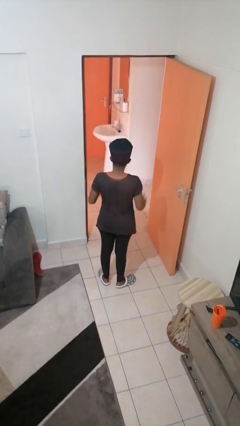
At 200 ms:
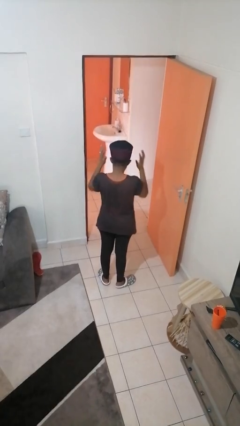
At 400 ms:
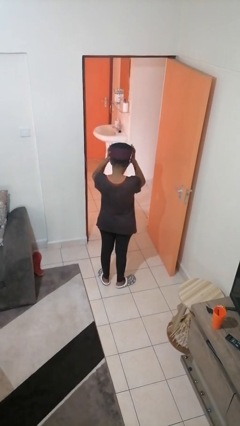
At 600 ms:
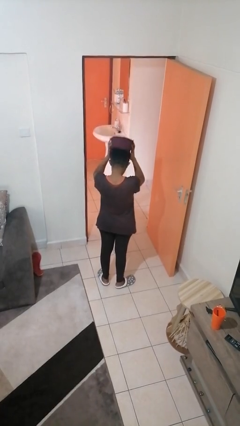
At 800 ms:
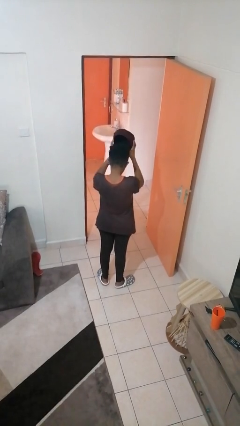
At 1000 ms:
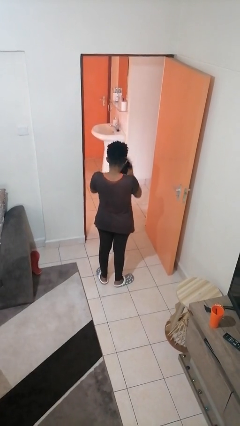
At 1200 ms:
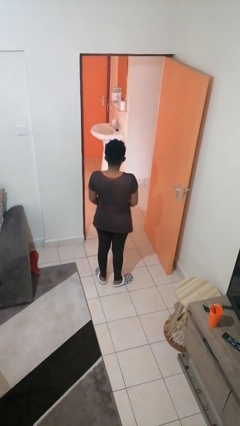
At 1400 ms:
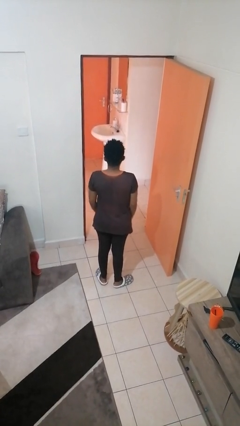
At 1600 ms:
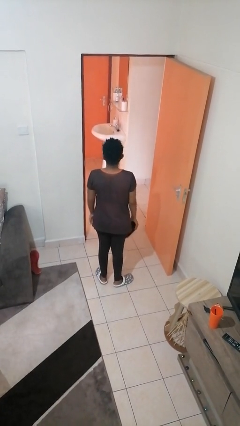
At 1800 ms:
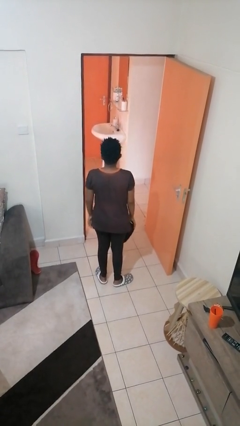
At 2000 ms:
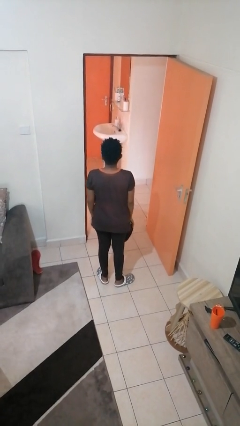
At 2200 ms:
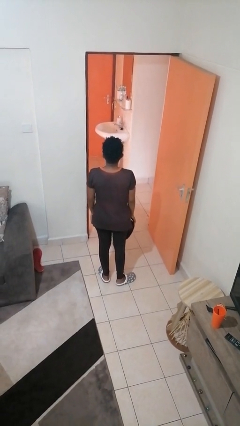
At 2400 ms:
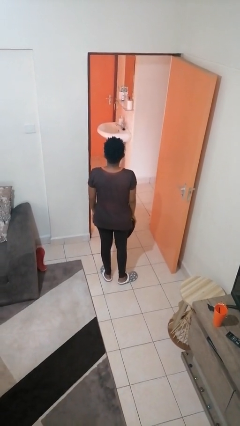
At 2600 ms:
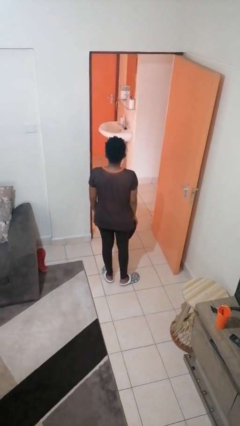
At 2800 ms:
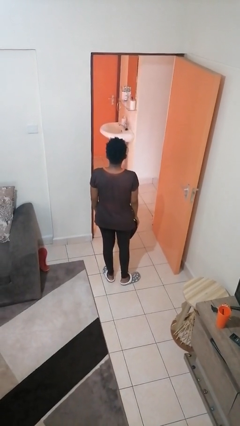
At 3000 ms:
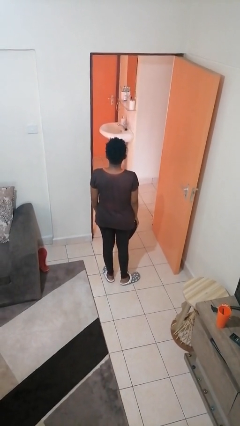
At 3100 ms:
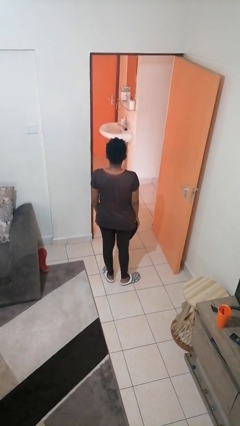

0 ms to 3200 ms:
person takes off hat

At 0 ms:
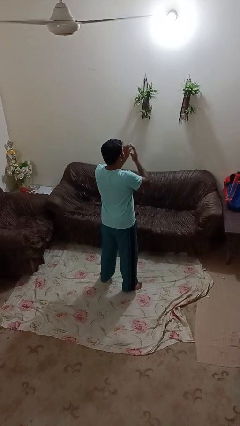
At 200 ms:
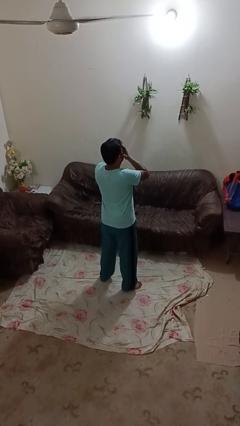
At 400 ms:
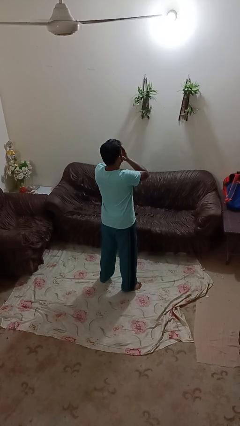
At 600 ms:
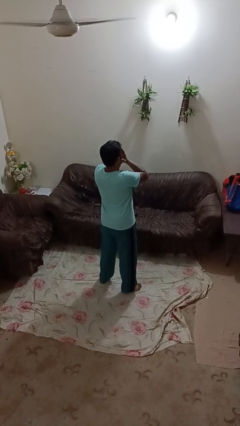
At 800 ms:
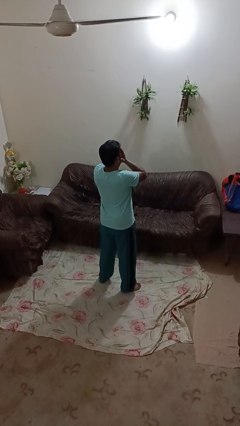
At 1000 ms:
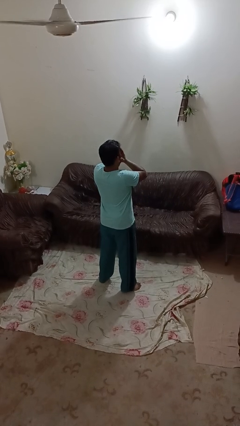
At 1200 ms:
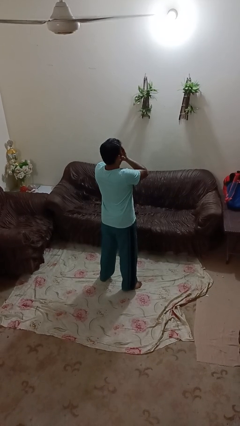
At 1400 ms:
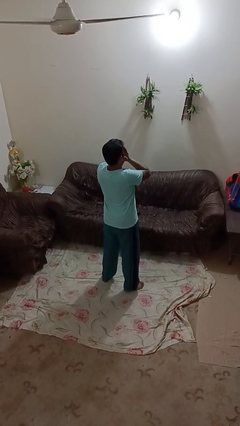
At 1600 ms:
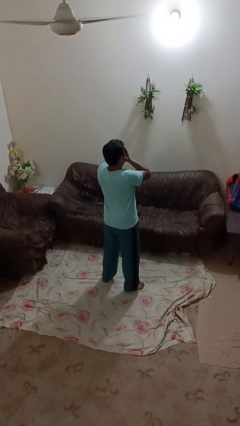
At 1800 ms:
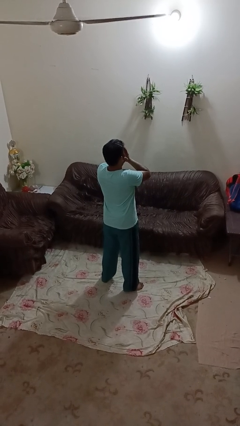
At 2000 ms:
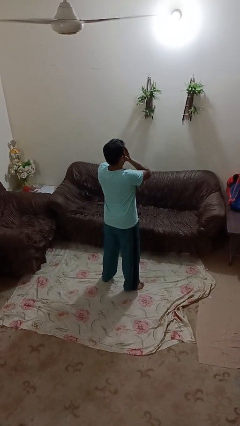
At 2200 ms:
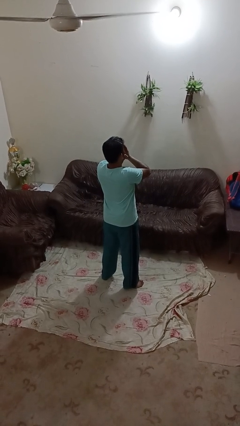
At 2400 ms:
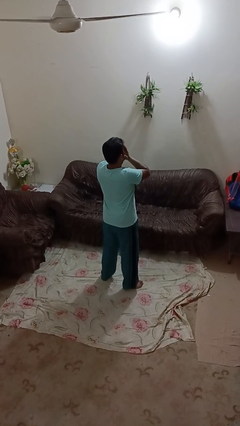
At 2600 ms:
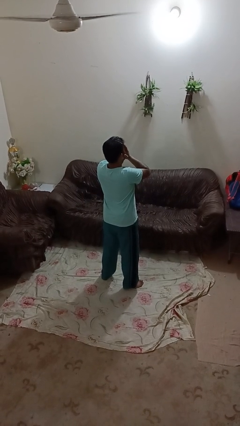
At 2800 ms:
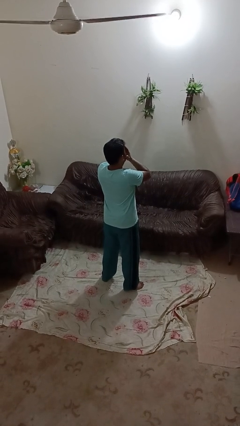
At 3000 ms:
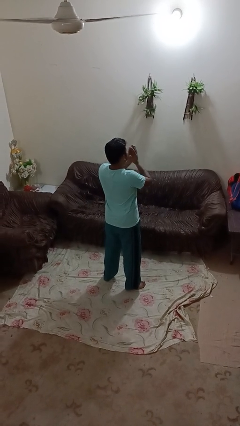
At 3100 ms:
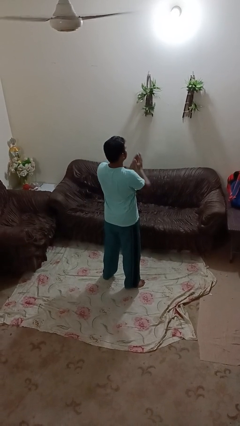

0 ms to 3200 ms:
person covers face with hands

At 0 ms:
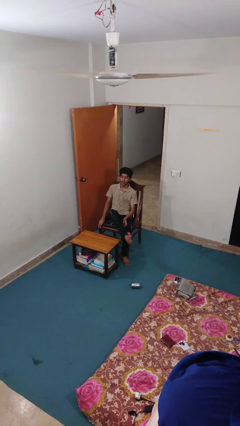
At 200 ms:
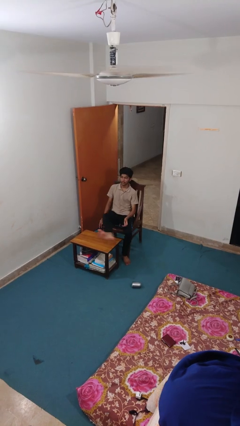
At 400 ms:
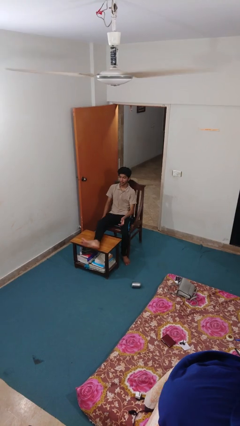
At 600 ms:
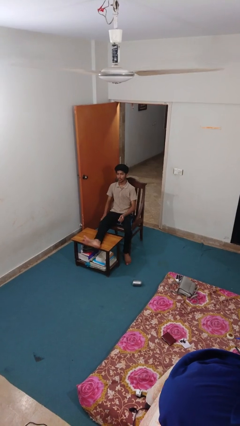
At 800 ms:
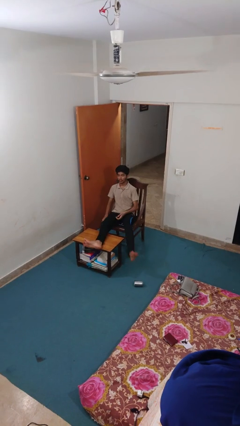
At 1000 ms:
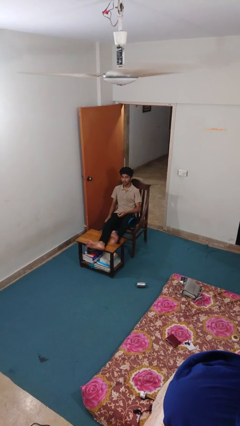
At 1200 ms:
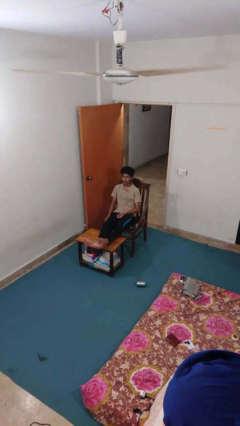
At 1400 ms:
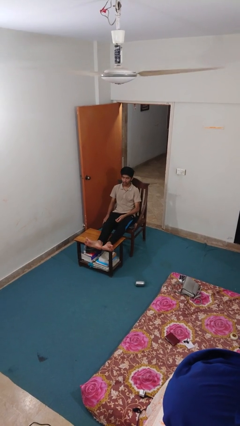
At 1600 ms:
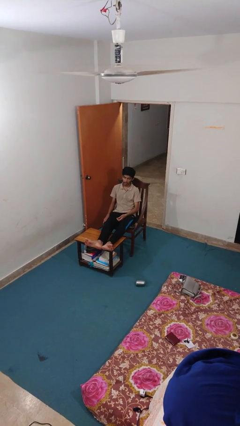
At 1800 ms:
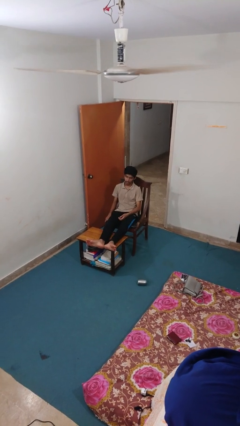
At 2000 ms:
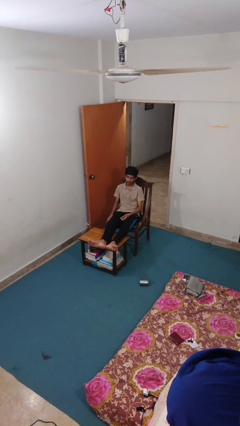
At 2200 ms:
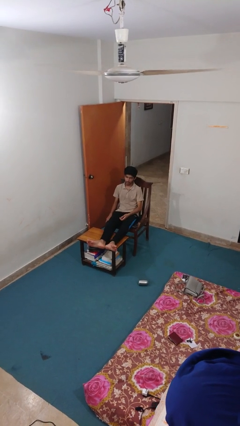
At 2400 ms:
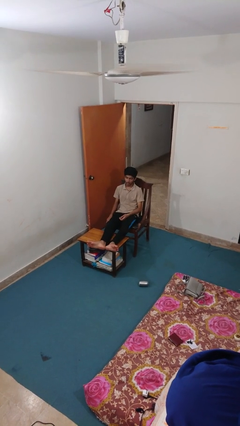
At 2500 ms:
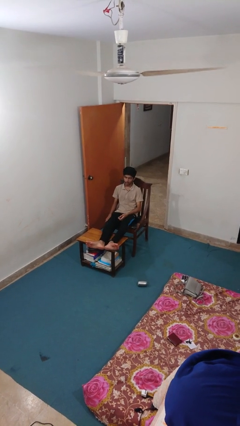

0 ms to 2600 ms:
person puts feet up

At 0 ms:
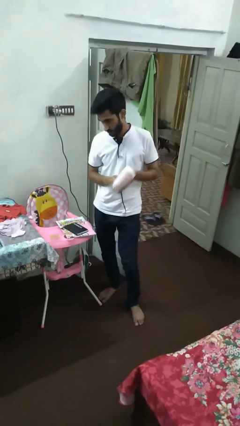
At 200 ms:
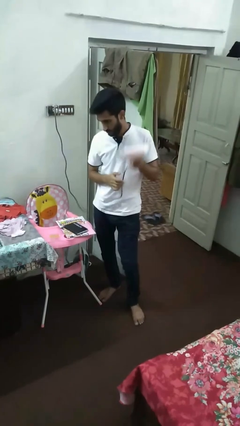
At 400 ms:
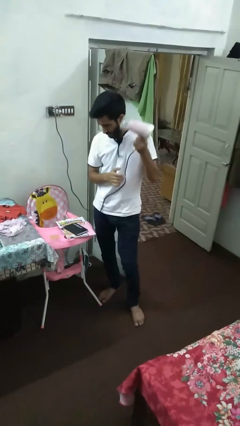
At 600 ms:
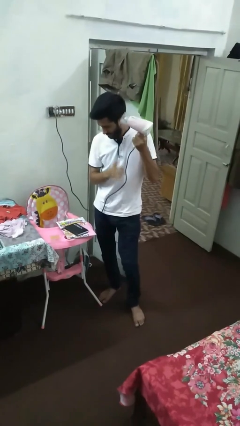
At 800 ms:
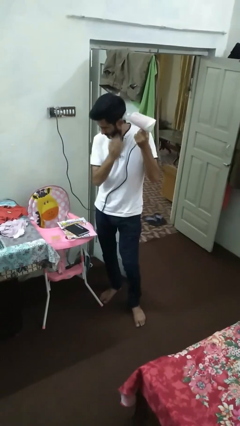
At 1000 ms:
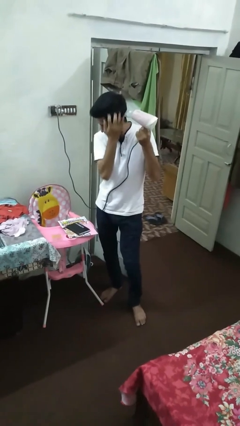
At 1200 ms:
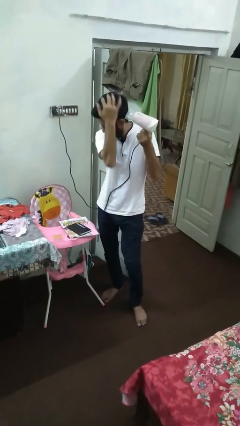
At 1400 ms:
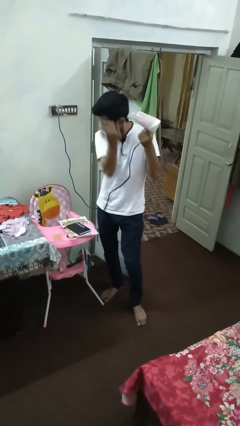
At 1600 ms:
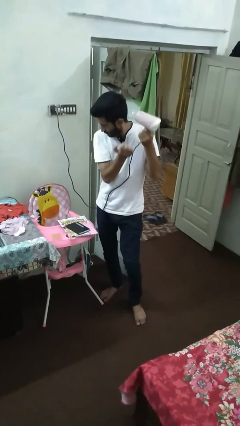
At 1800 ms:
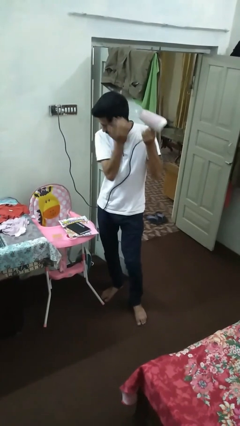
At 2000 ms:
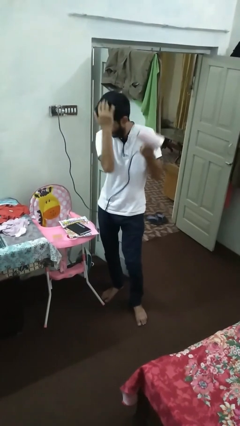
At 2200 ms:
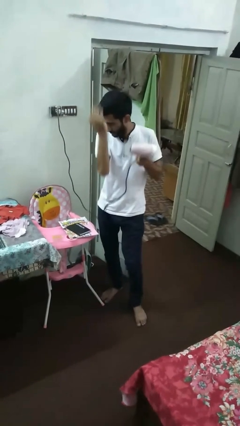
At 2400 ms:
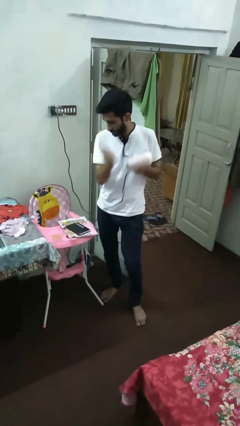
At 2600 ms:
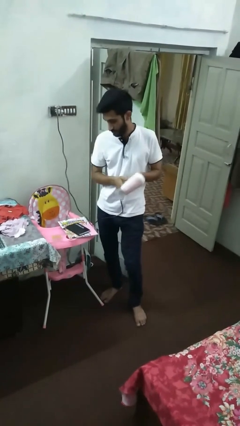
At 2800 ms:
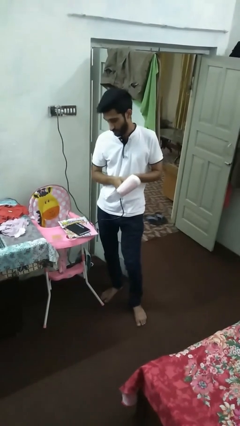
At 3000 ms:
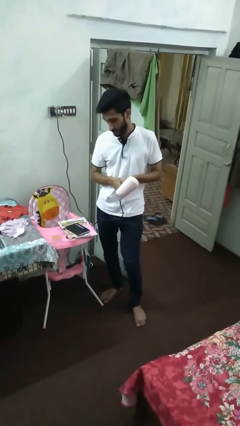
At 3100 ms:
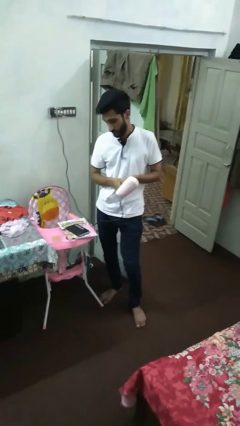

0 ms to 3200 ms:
person dries hair with hairdryer

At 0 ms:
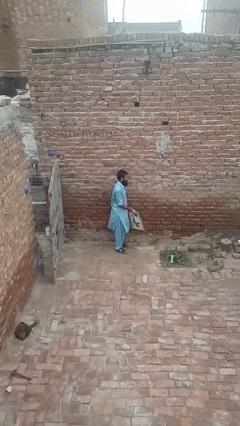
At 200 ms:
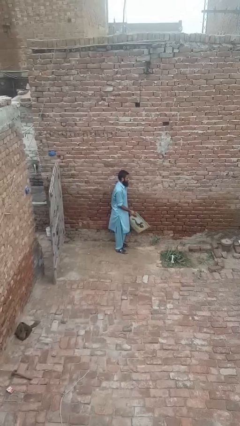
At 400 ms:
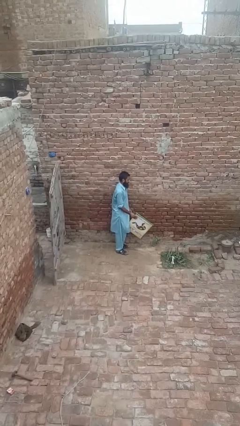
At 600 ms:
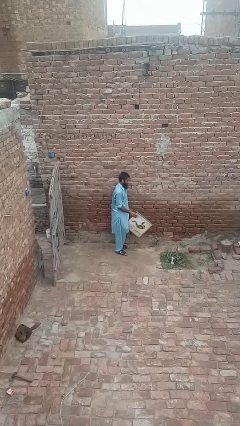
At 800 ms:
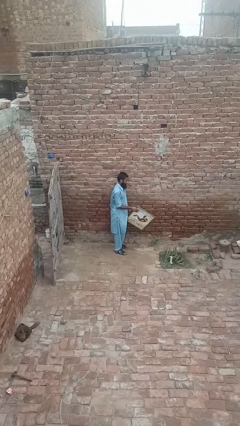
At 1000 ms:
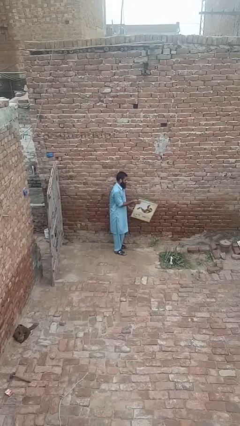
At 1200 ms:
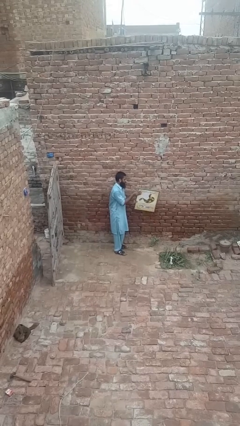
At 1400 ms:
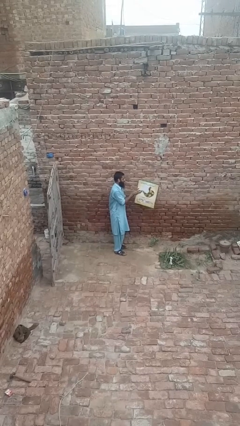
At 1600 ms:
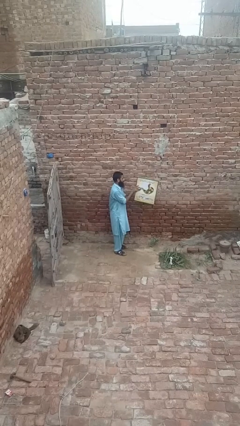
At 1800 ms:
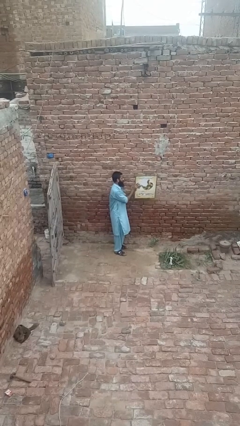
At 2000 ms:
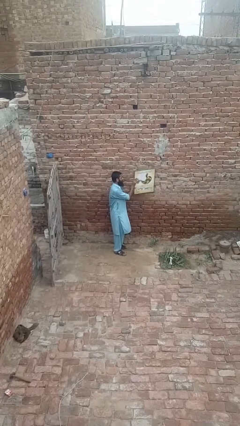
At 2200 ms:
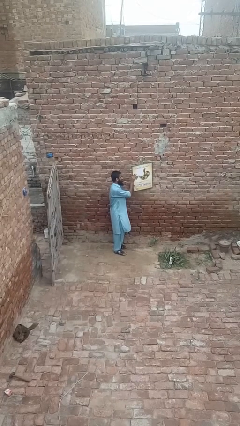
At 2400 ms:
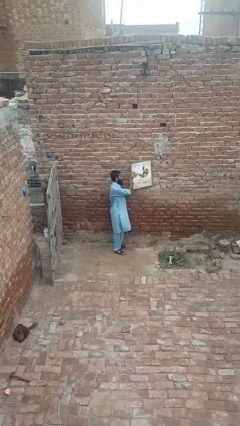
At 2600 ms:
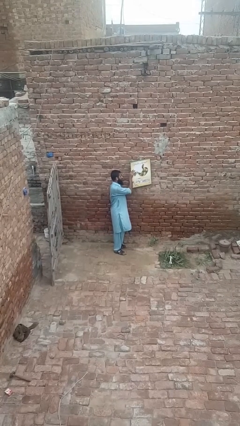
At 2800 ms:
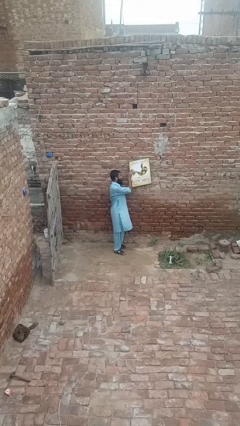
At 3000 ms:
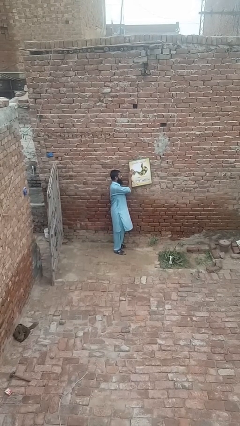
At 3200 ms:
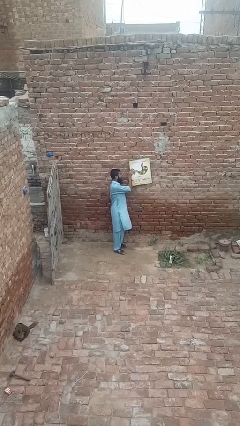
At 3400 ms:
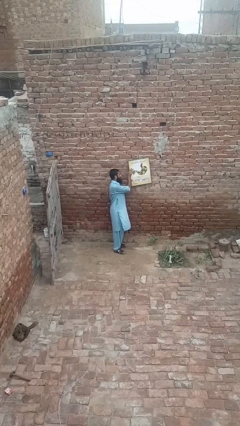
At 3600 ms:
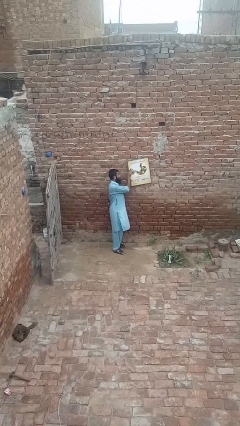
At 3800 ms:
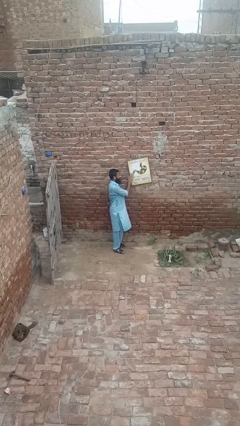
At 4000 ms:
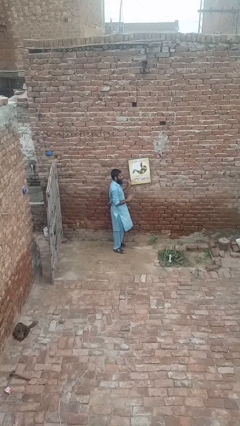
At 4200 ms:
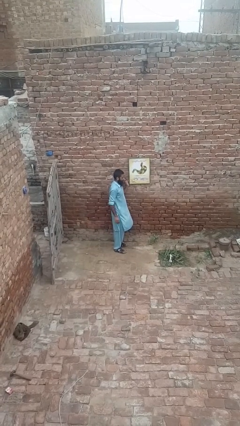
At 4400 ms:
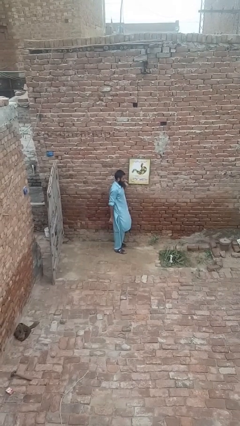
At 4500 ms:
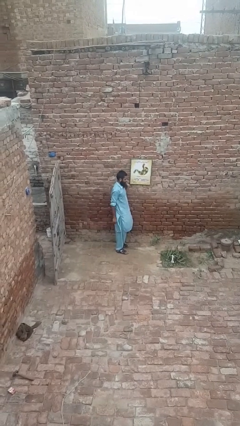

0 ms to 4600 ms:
person puts up picture frame

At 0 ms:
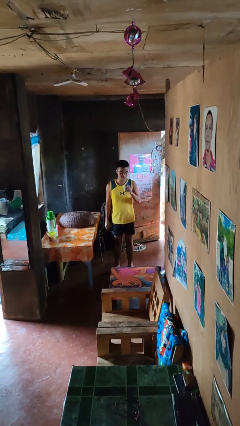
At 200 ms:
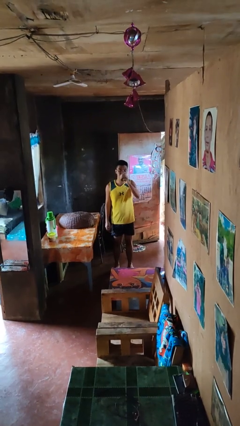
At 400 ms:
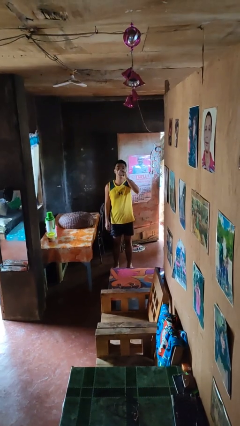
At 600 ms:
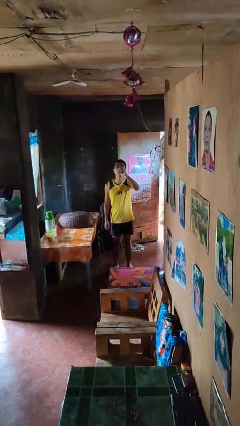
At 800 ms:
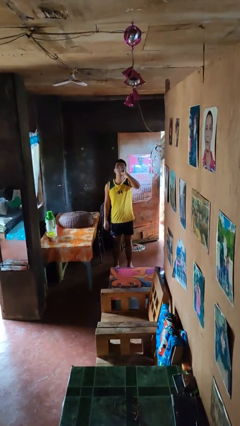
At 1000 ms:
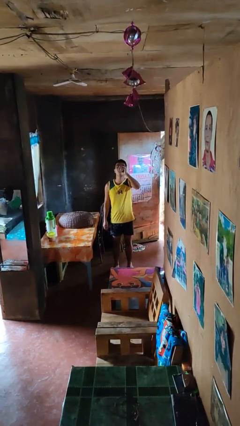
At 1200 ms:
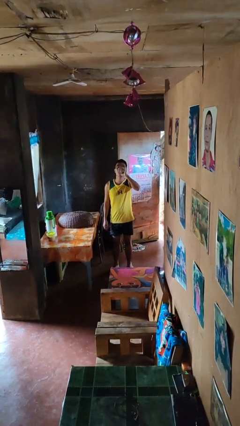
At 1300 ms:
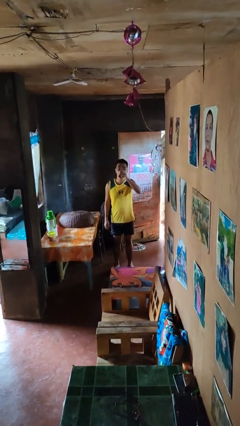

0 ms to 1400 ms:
person drinks from beverage can
